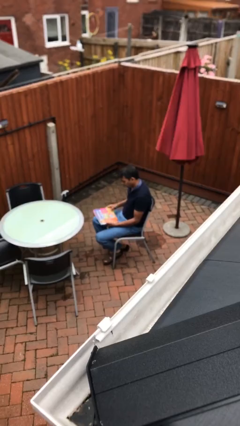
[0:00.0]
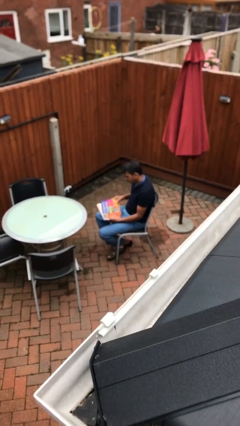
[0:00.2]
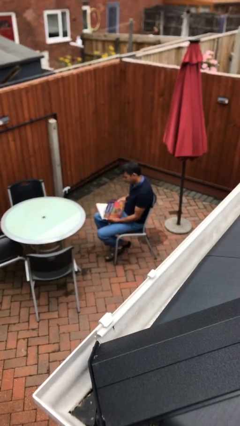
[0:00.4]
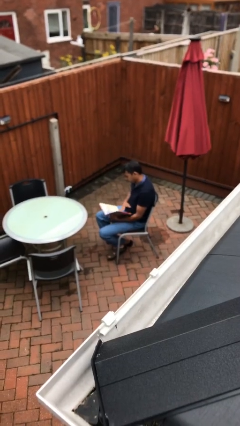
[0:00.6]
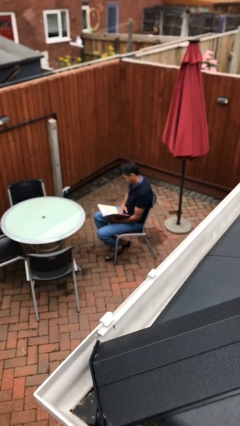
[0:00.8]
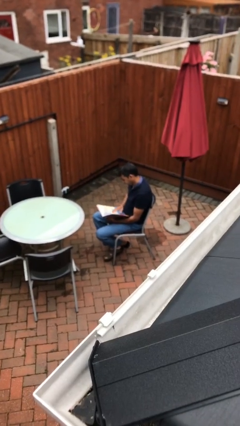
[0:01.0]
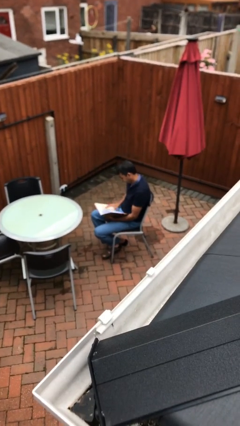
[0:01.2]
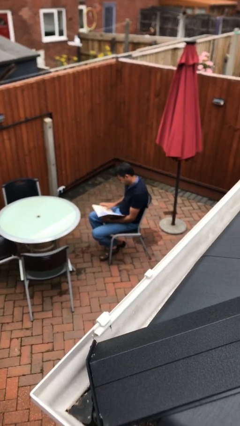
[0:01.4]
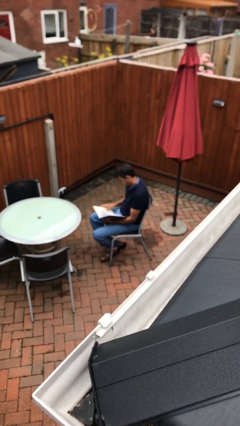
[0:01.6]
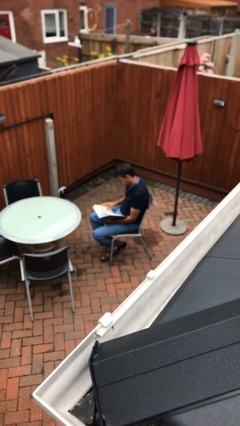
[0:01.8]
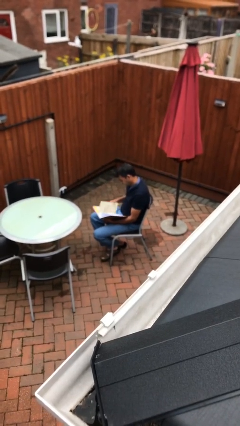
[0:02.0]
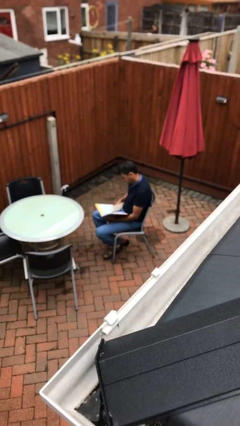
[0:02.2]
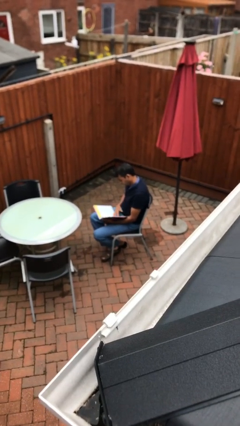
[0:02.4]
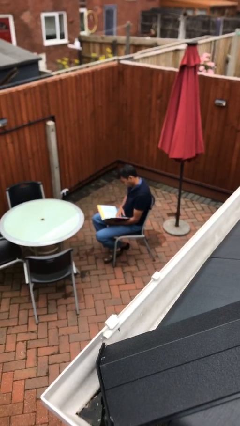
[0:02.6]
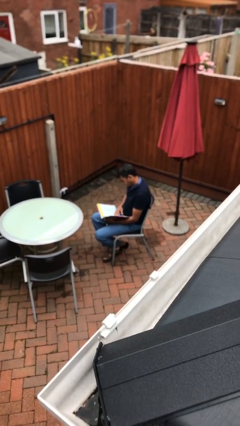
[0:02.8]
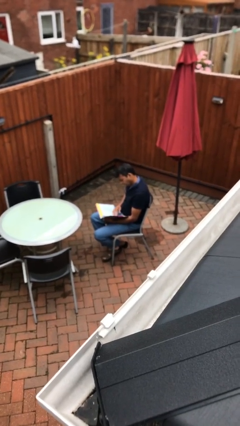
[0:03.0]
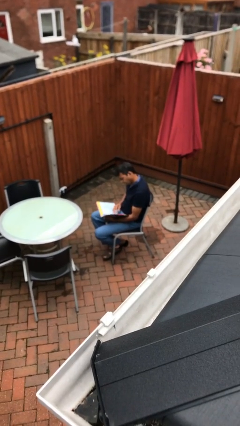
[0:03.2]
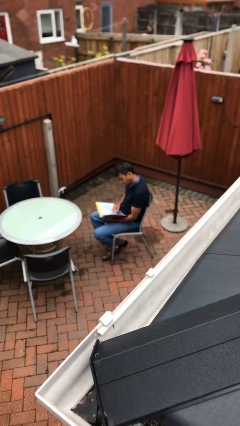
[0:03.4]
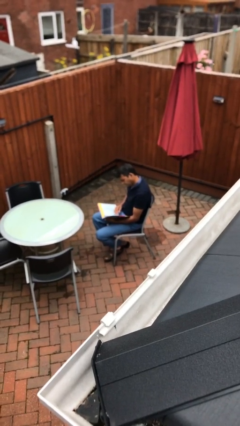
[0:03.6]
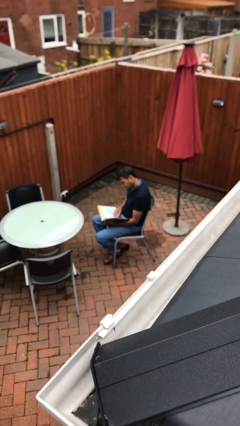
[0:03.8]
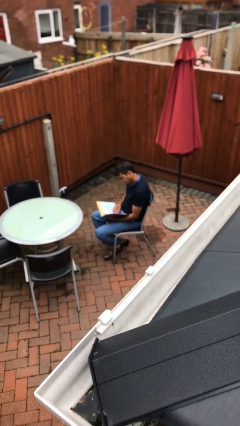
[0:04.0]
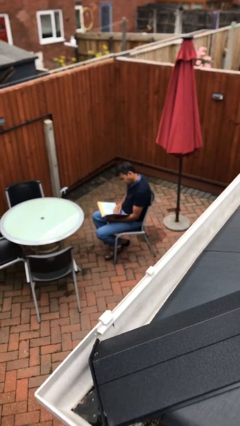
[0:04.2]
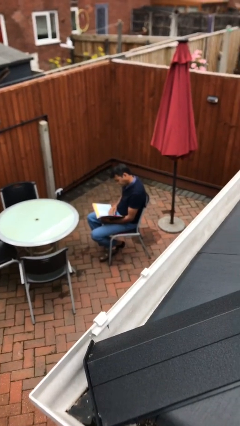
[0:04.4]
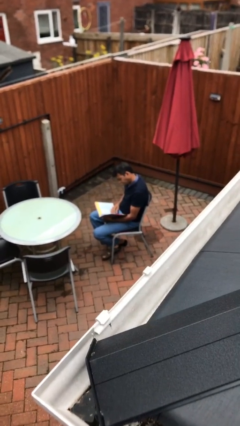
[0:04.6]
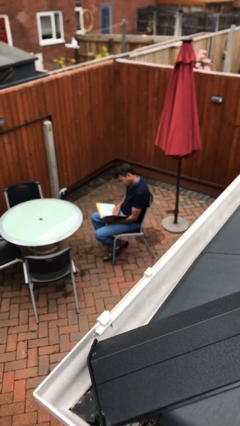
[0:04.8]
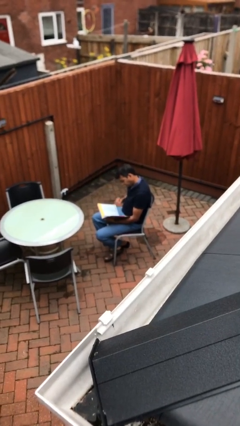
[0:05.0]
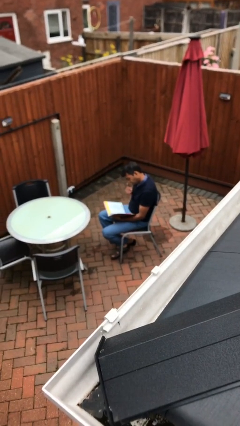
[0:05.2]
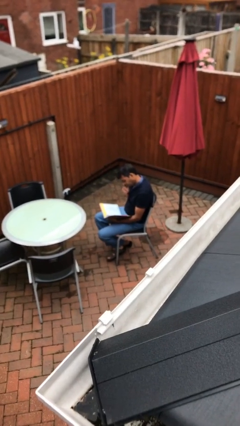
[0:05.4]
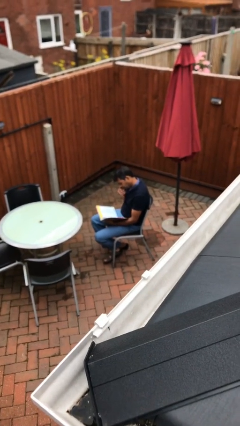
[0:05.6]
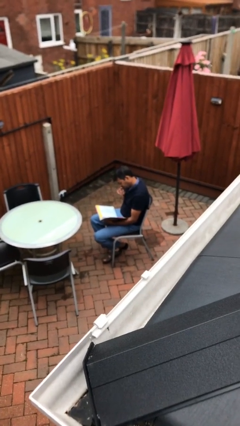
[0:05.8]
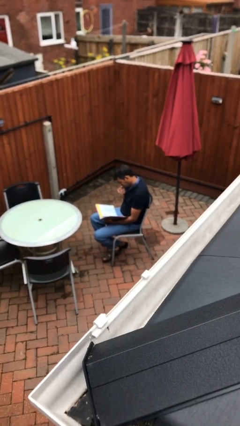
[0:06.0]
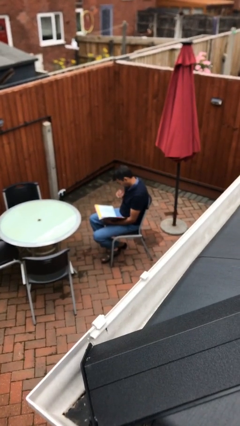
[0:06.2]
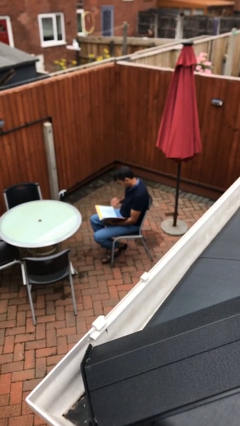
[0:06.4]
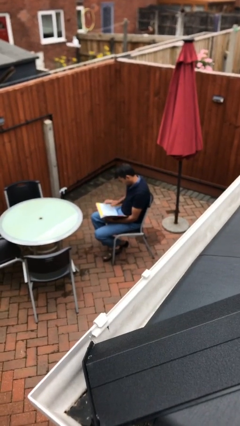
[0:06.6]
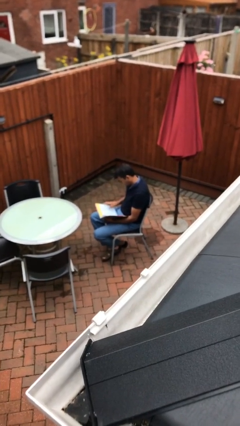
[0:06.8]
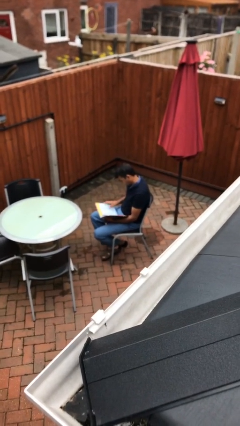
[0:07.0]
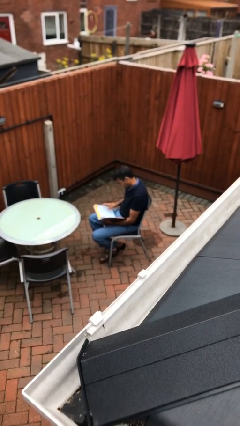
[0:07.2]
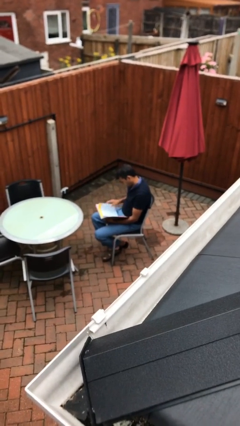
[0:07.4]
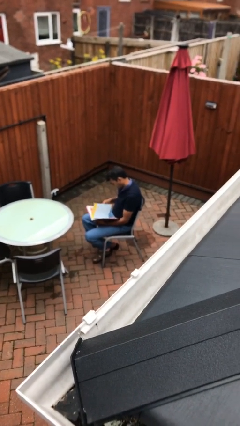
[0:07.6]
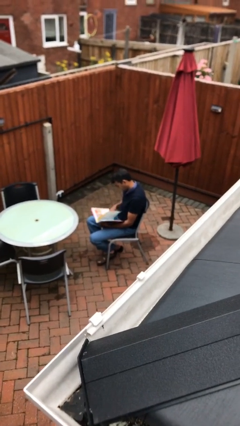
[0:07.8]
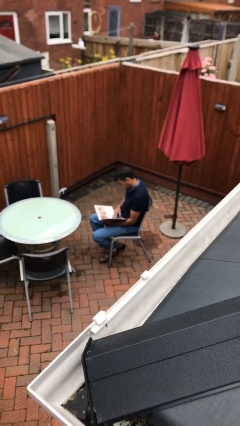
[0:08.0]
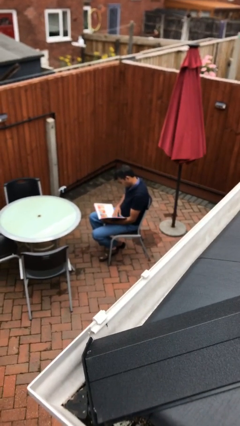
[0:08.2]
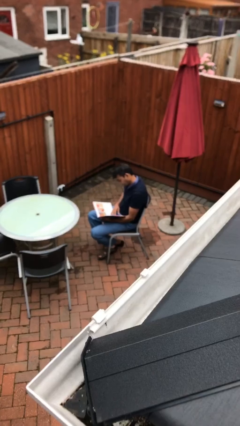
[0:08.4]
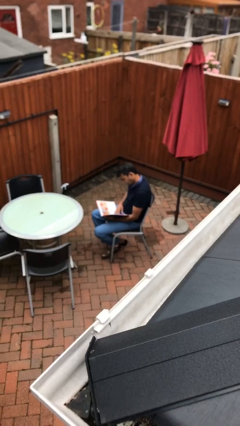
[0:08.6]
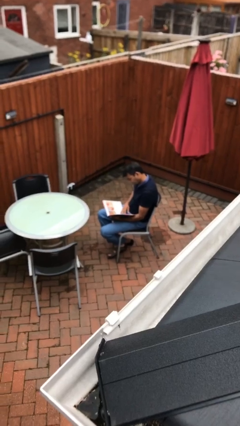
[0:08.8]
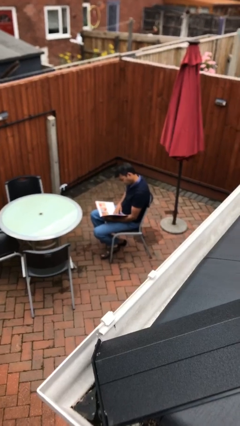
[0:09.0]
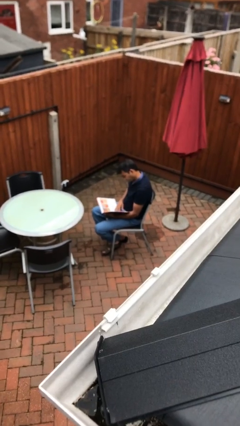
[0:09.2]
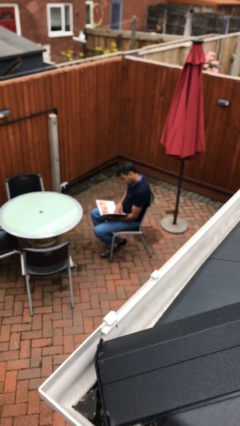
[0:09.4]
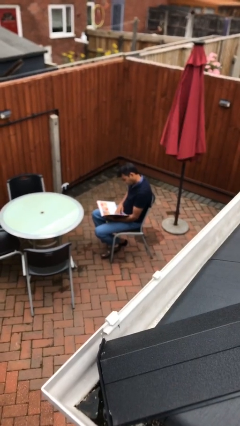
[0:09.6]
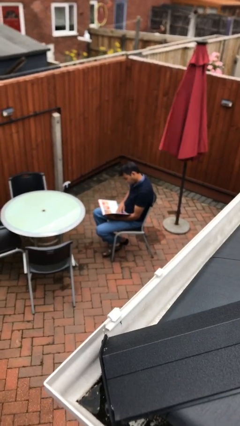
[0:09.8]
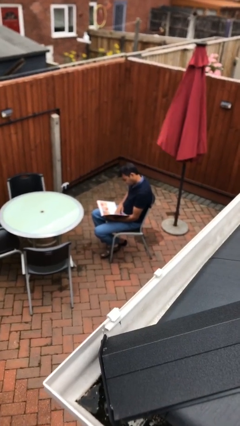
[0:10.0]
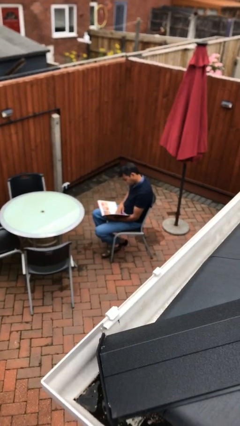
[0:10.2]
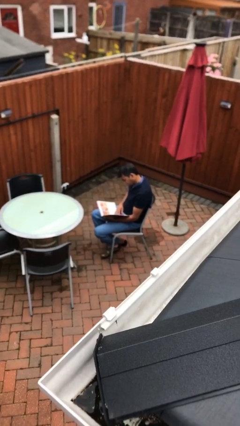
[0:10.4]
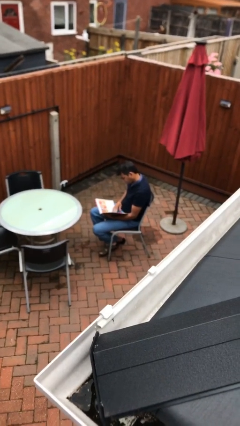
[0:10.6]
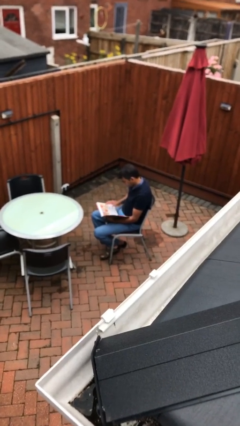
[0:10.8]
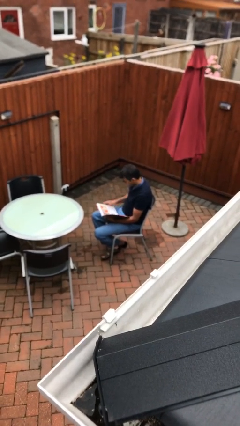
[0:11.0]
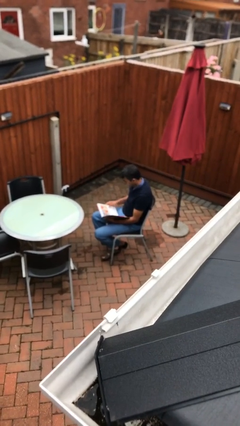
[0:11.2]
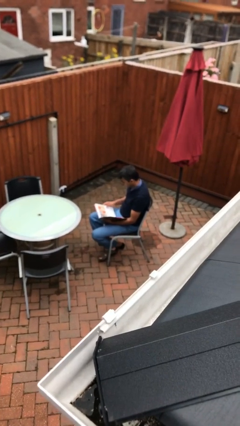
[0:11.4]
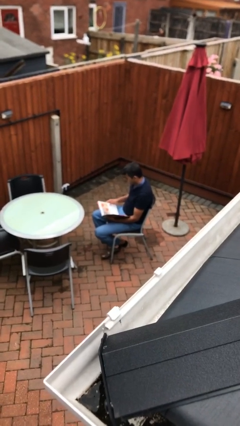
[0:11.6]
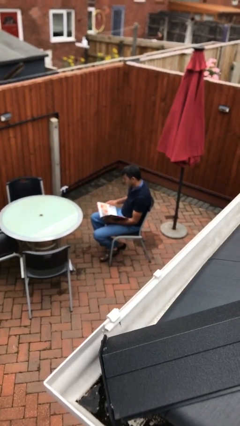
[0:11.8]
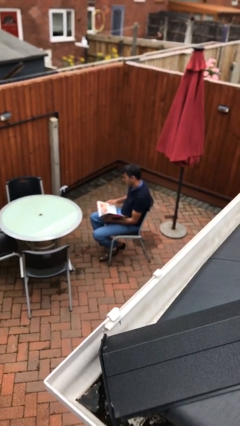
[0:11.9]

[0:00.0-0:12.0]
person reads document

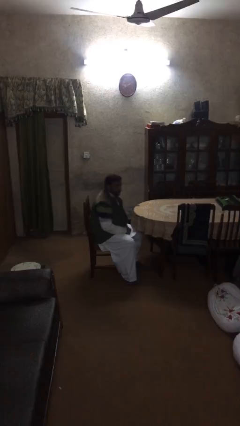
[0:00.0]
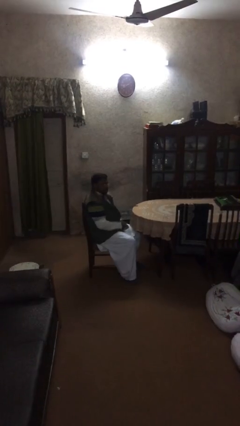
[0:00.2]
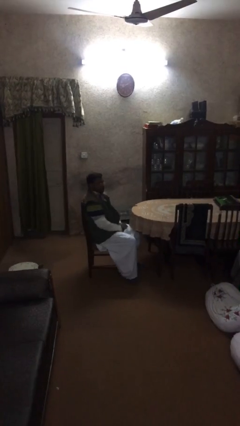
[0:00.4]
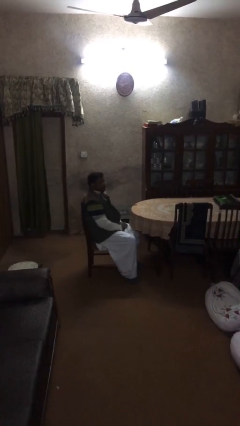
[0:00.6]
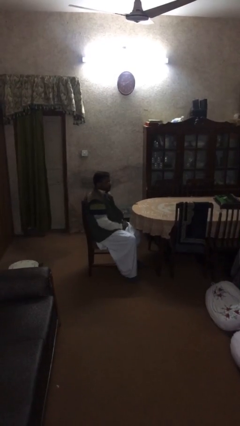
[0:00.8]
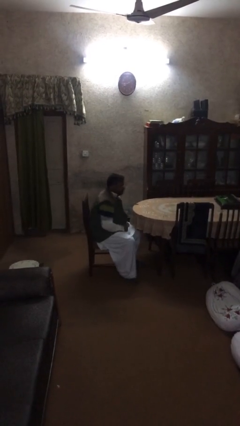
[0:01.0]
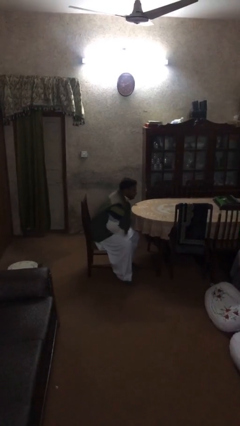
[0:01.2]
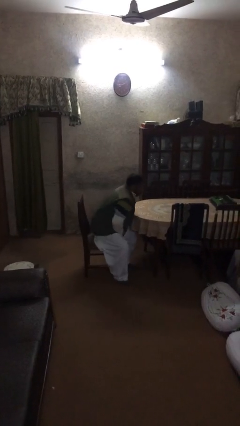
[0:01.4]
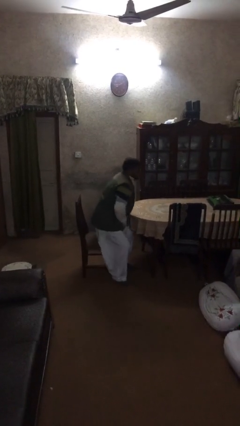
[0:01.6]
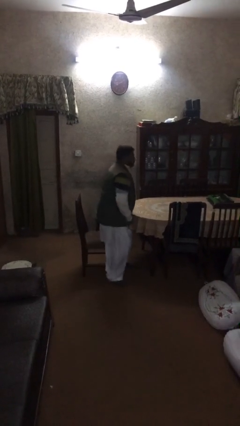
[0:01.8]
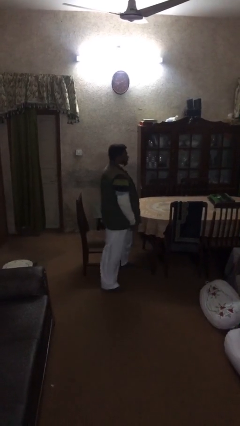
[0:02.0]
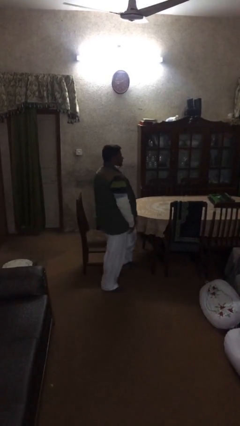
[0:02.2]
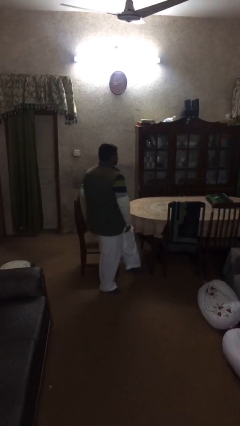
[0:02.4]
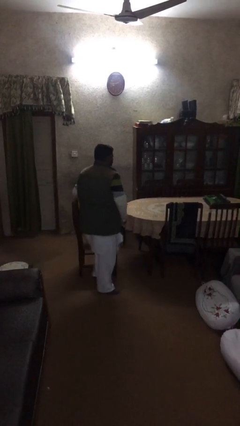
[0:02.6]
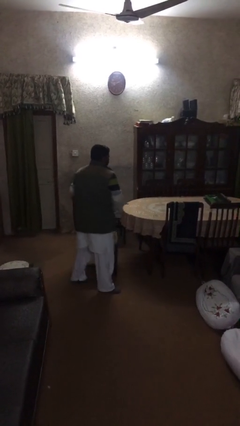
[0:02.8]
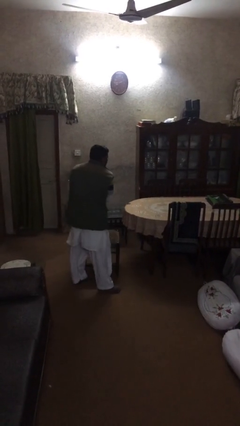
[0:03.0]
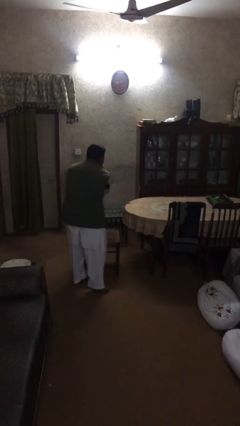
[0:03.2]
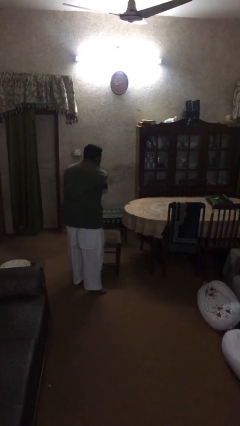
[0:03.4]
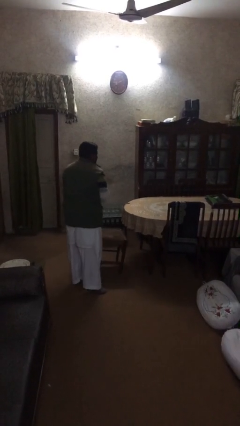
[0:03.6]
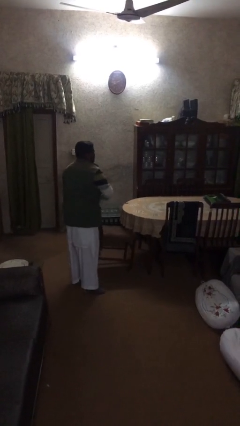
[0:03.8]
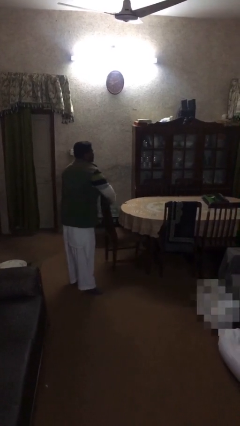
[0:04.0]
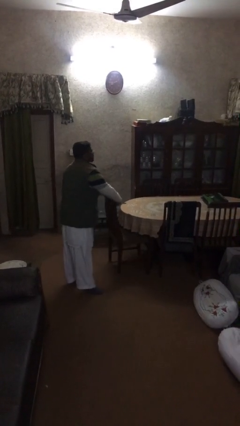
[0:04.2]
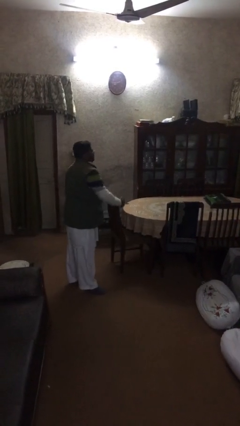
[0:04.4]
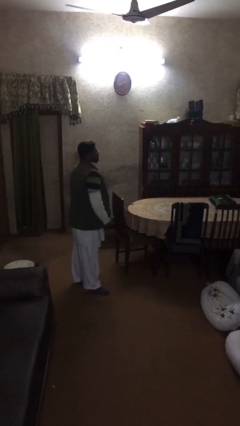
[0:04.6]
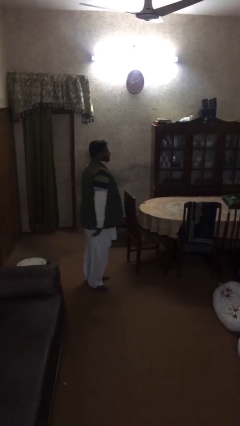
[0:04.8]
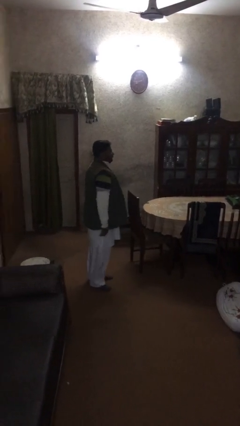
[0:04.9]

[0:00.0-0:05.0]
person stands up

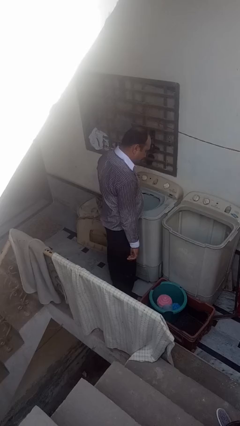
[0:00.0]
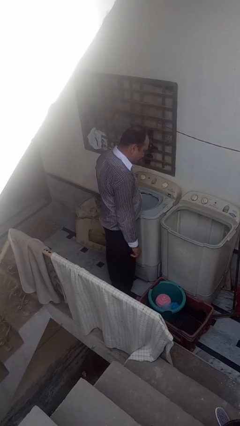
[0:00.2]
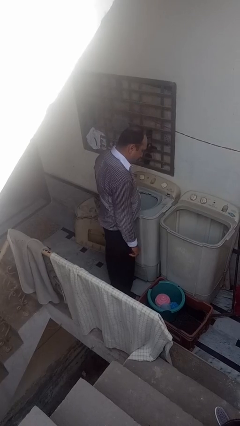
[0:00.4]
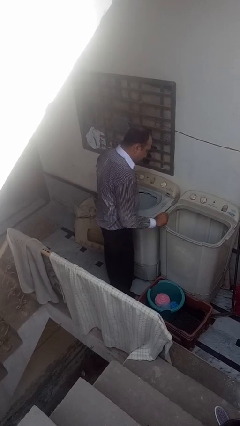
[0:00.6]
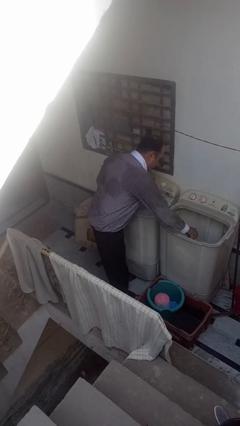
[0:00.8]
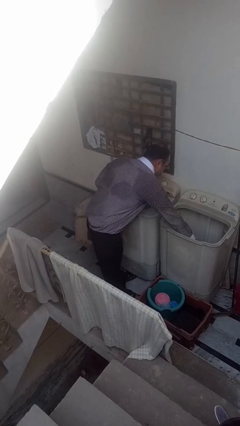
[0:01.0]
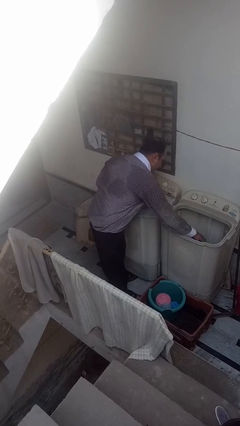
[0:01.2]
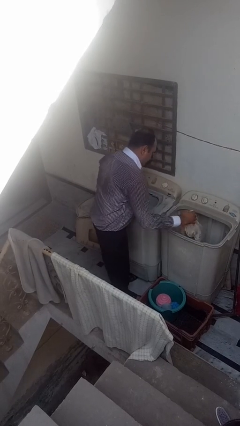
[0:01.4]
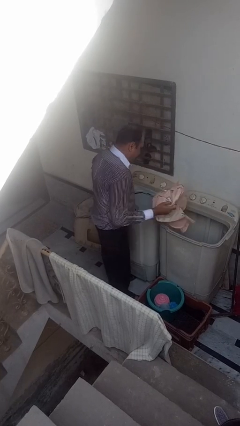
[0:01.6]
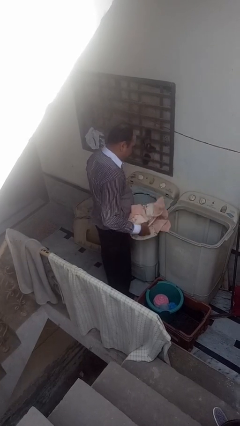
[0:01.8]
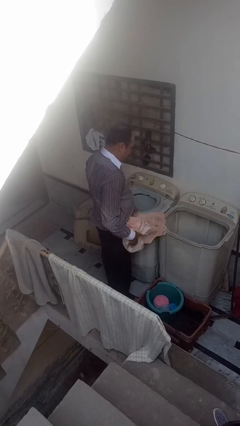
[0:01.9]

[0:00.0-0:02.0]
person unloads clotheswasher
